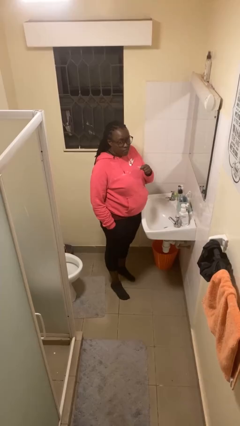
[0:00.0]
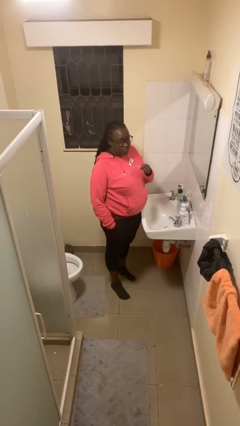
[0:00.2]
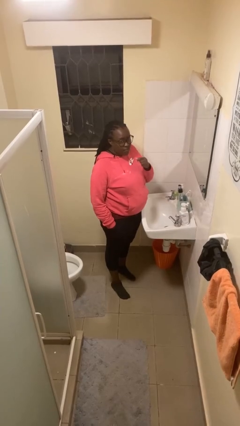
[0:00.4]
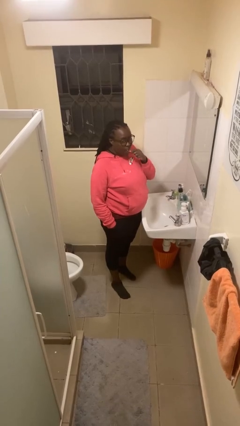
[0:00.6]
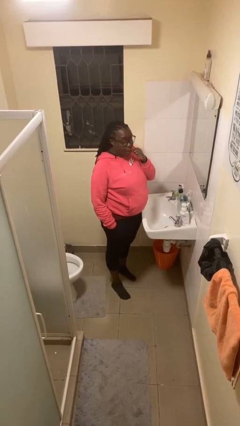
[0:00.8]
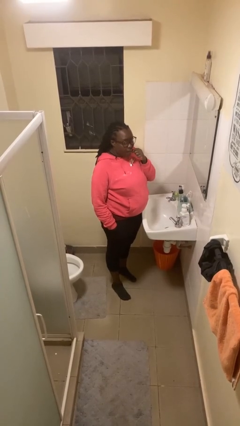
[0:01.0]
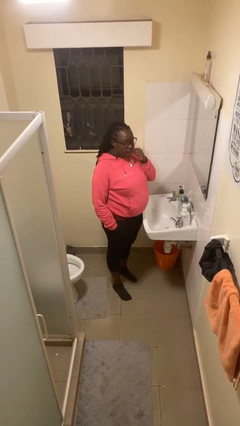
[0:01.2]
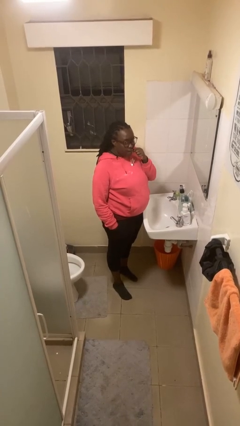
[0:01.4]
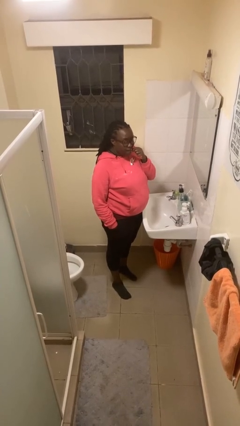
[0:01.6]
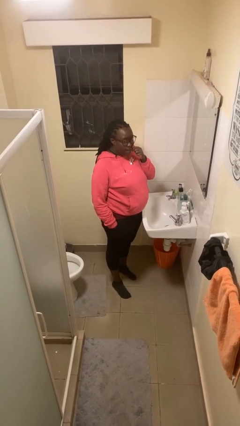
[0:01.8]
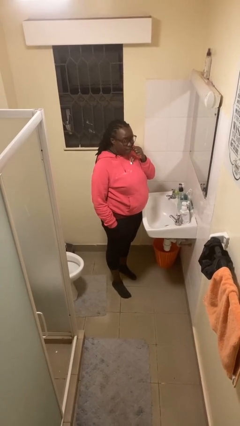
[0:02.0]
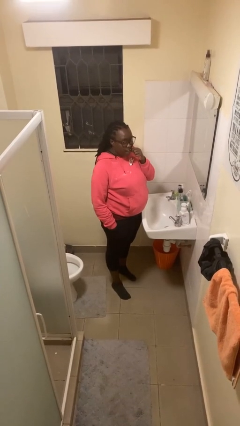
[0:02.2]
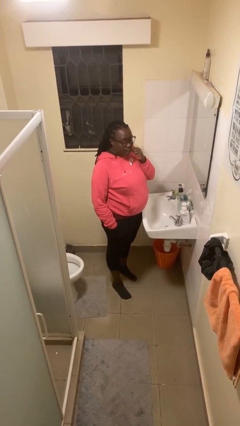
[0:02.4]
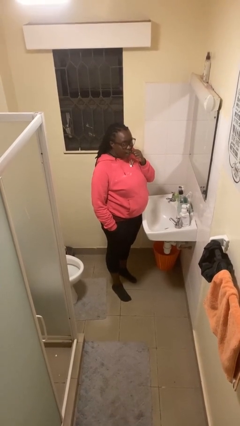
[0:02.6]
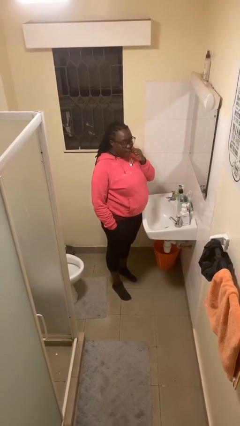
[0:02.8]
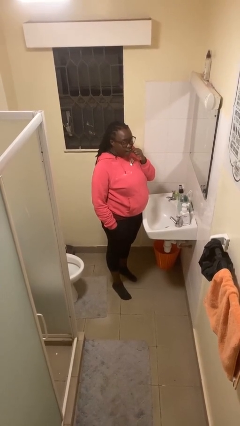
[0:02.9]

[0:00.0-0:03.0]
person flosses

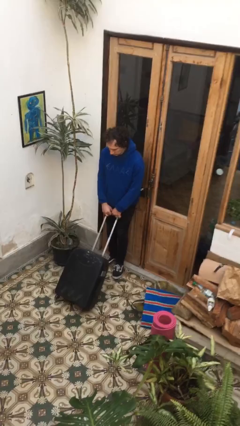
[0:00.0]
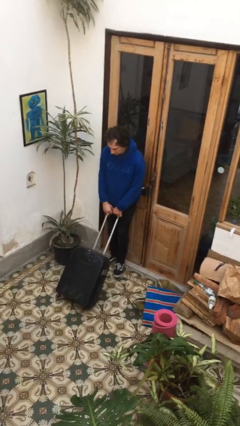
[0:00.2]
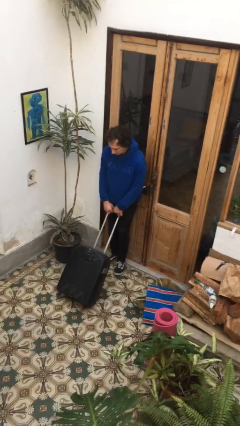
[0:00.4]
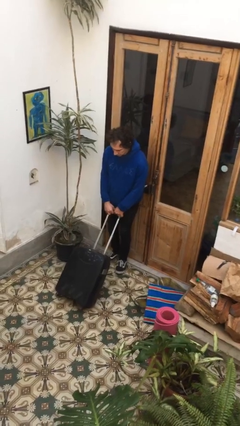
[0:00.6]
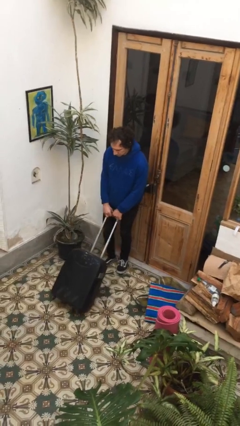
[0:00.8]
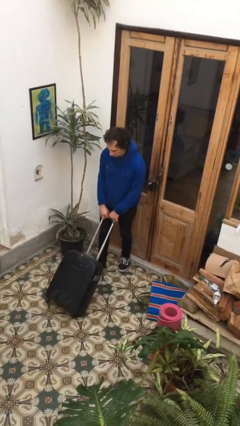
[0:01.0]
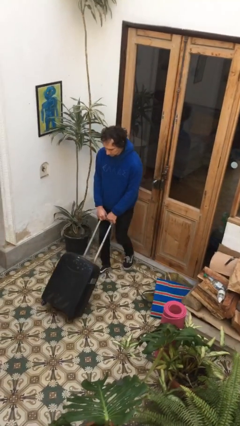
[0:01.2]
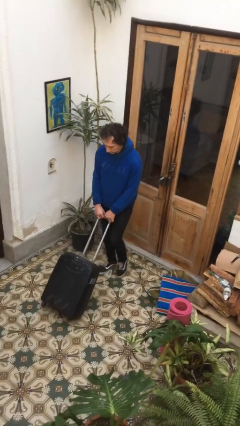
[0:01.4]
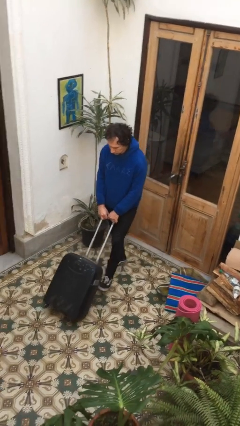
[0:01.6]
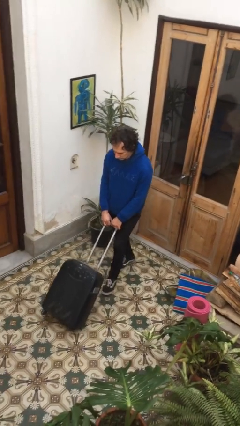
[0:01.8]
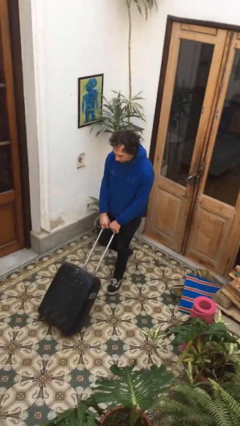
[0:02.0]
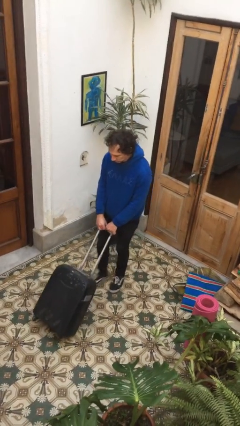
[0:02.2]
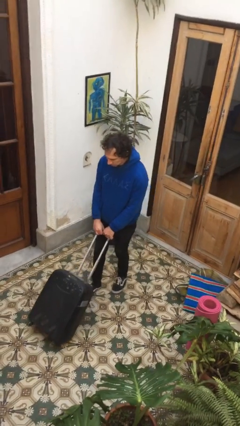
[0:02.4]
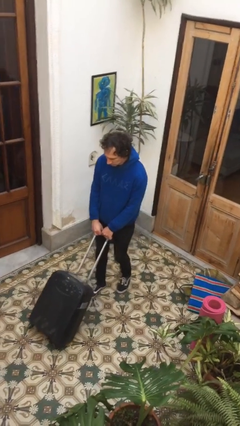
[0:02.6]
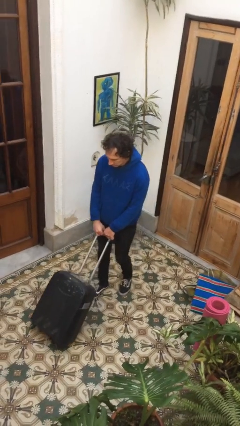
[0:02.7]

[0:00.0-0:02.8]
person pushes wheeled cart

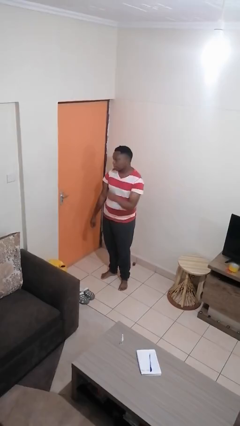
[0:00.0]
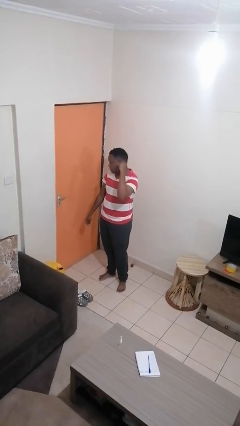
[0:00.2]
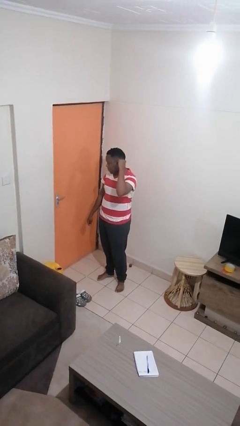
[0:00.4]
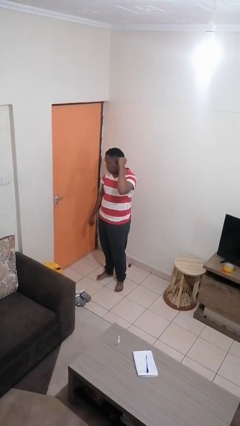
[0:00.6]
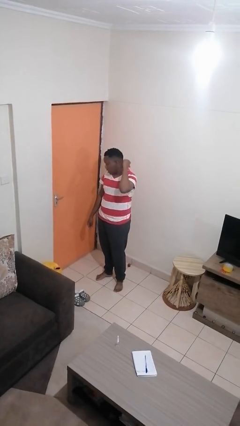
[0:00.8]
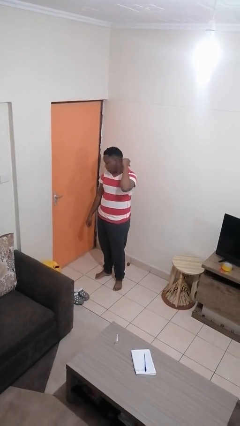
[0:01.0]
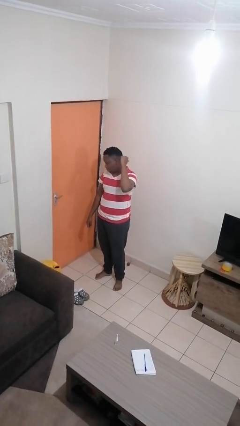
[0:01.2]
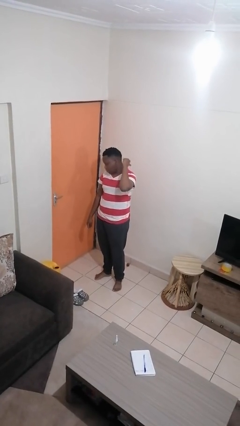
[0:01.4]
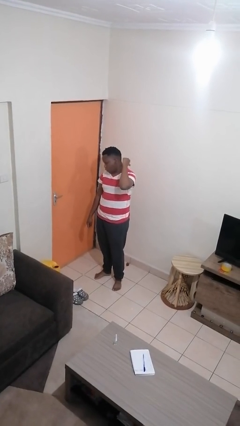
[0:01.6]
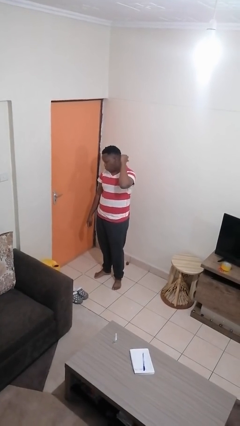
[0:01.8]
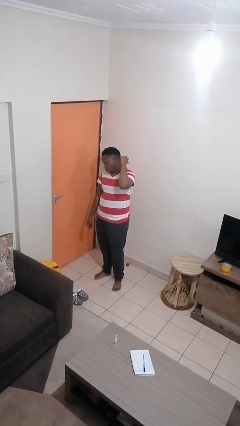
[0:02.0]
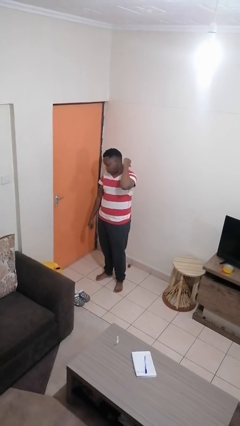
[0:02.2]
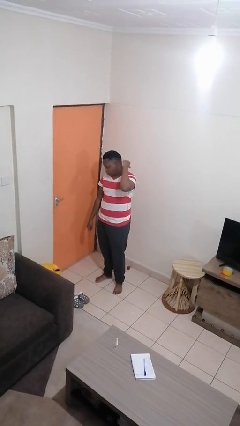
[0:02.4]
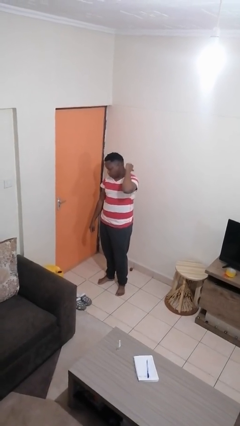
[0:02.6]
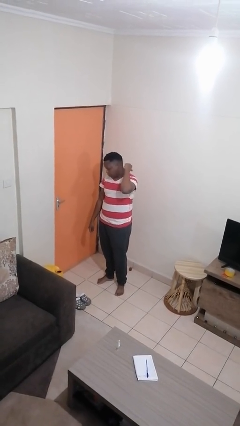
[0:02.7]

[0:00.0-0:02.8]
person gestures behind me

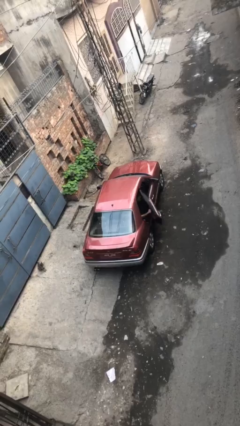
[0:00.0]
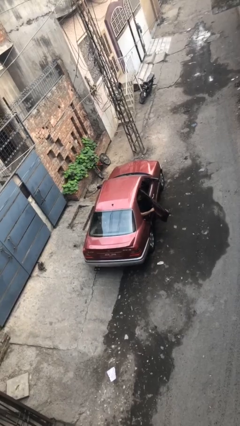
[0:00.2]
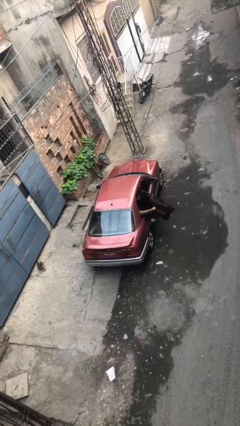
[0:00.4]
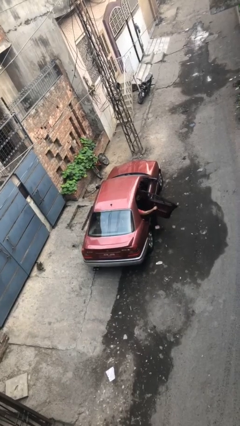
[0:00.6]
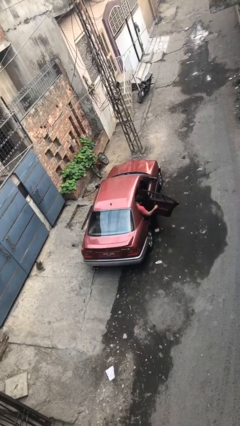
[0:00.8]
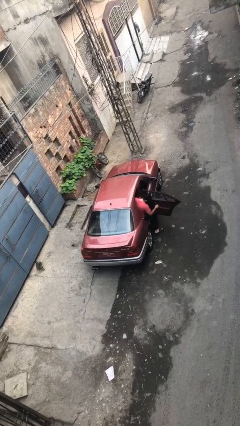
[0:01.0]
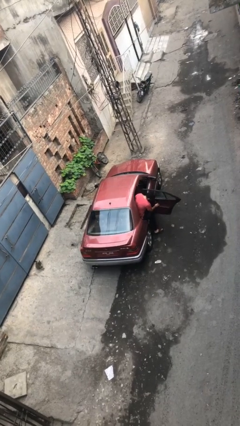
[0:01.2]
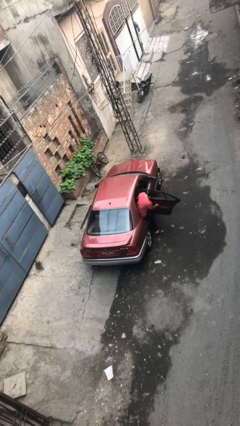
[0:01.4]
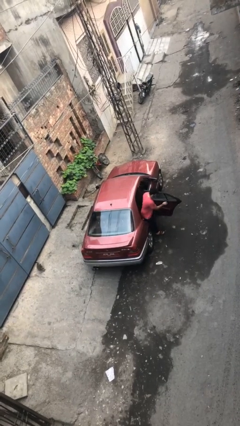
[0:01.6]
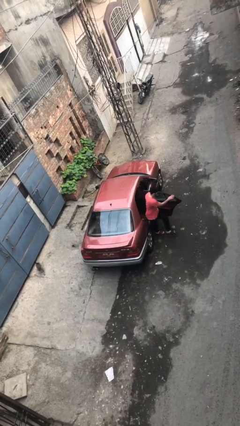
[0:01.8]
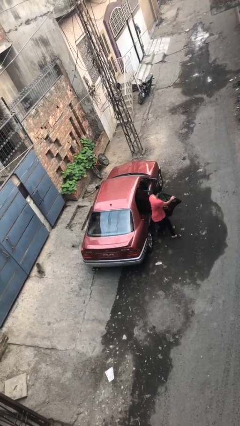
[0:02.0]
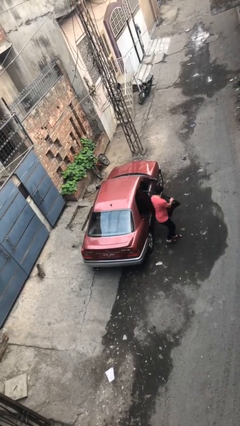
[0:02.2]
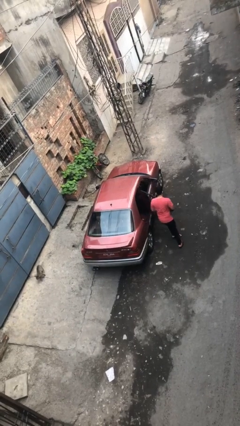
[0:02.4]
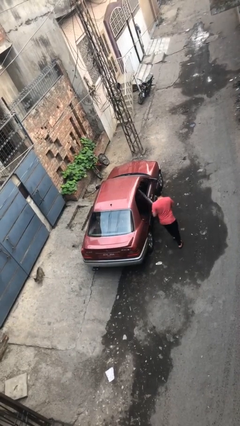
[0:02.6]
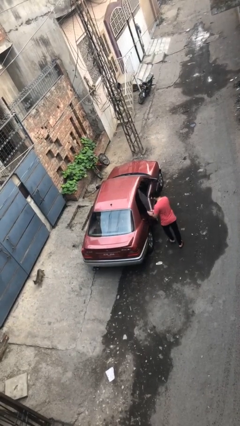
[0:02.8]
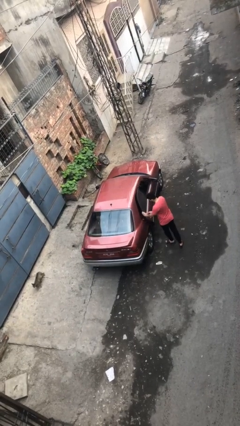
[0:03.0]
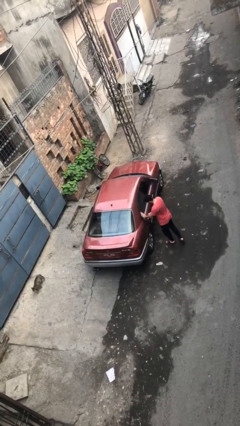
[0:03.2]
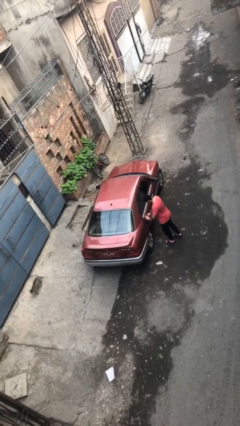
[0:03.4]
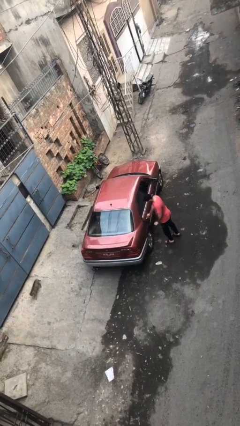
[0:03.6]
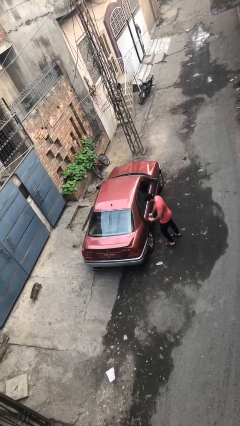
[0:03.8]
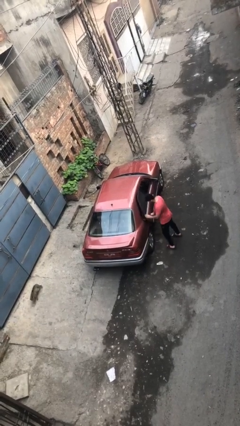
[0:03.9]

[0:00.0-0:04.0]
car drops off person

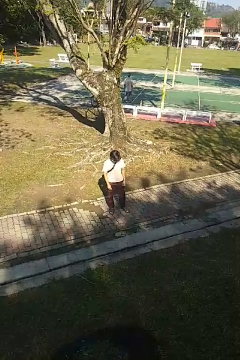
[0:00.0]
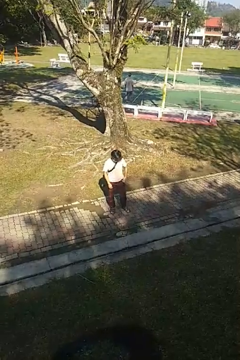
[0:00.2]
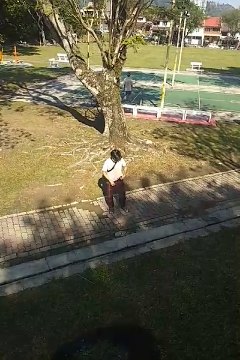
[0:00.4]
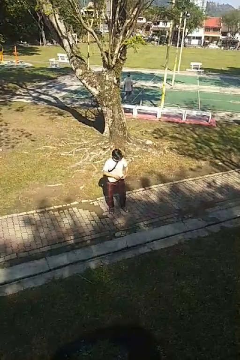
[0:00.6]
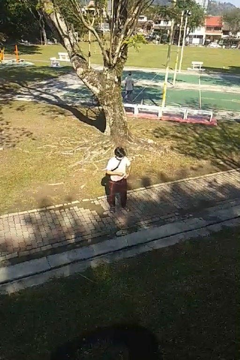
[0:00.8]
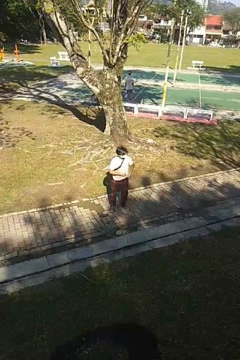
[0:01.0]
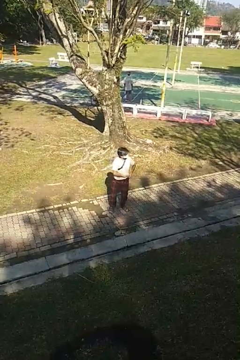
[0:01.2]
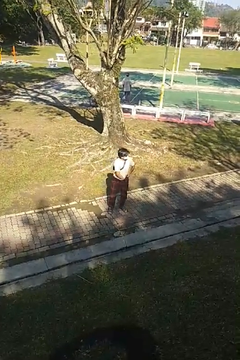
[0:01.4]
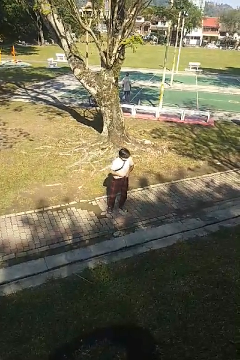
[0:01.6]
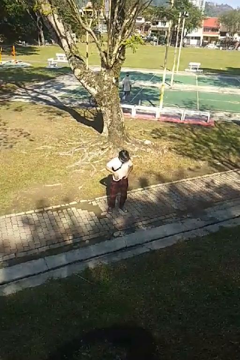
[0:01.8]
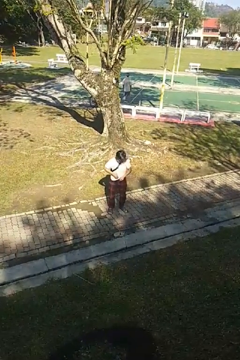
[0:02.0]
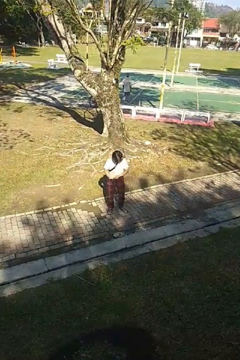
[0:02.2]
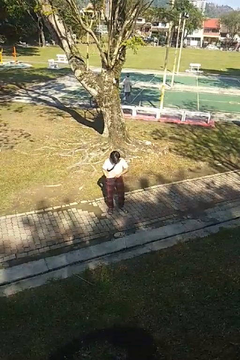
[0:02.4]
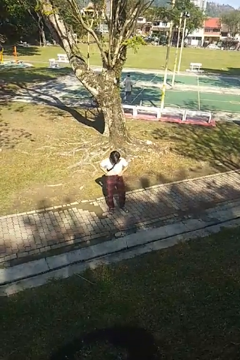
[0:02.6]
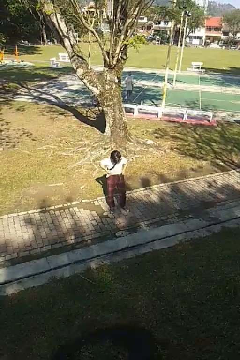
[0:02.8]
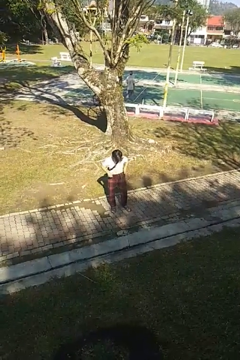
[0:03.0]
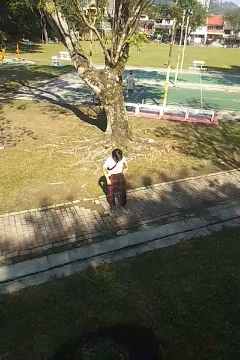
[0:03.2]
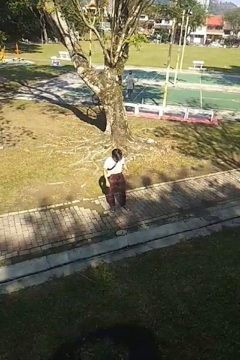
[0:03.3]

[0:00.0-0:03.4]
person tucks in shirt

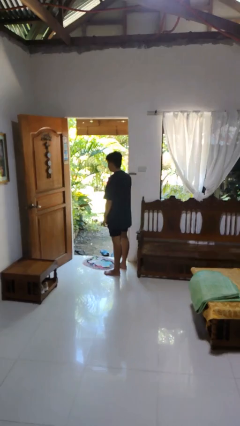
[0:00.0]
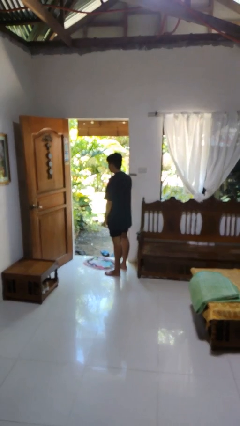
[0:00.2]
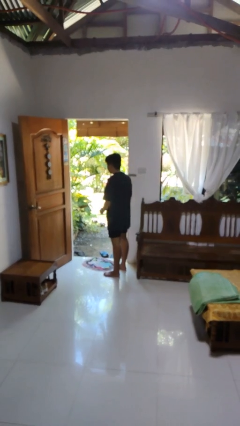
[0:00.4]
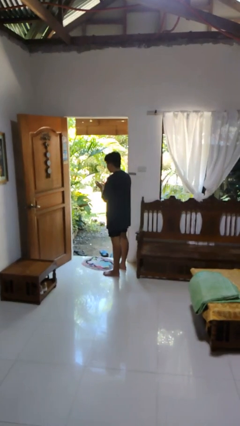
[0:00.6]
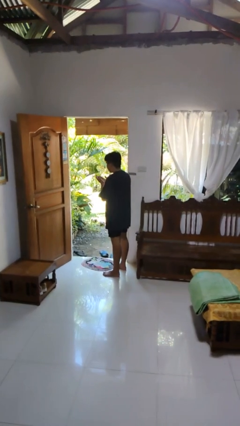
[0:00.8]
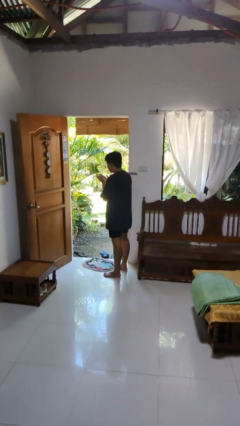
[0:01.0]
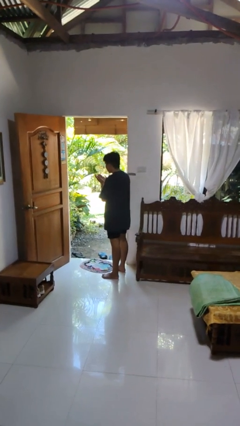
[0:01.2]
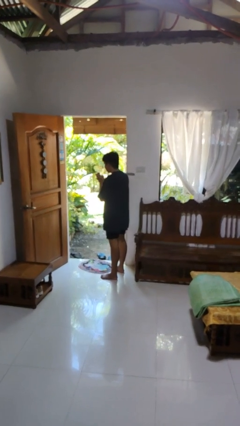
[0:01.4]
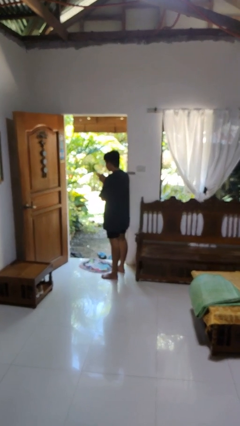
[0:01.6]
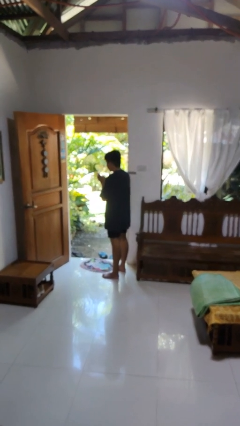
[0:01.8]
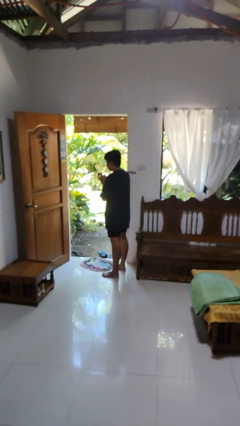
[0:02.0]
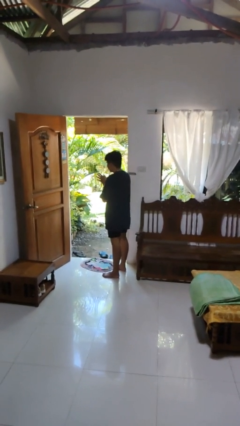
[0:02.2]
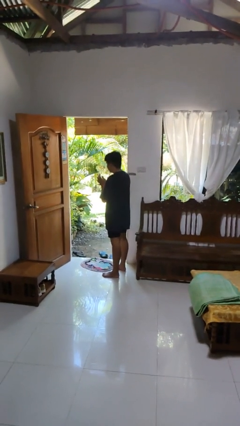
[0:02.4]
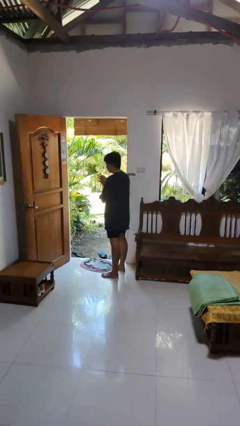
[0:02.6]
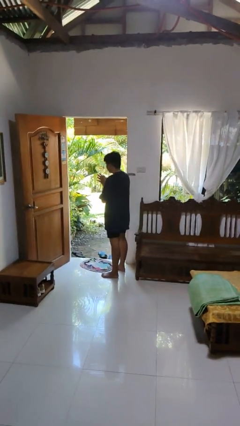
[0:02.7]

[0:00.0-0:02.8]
person blows into hands
